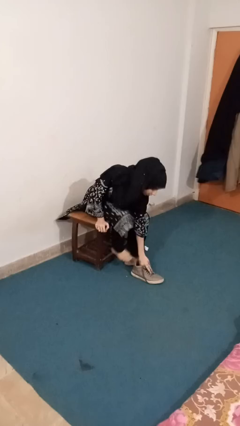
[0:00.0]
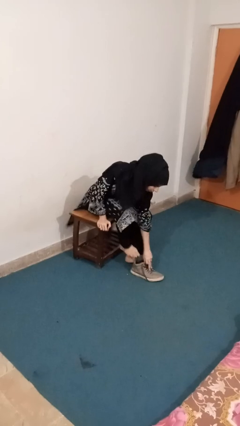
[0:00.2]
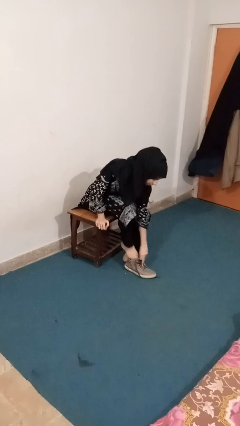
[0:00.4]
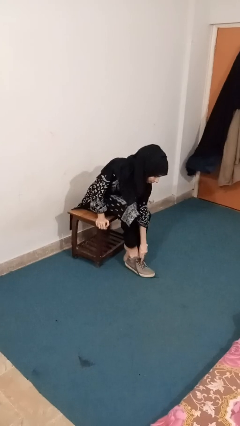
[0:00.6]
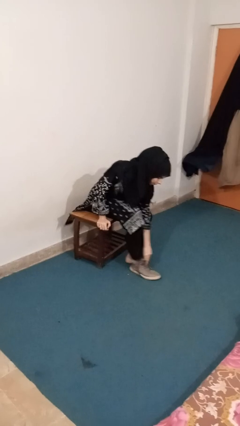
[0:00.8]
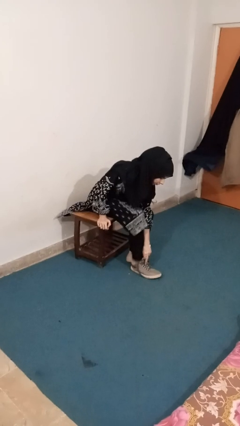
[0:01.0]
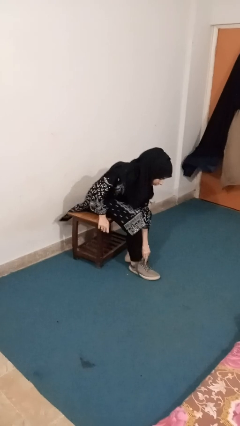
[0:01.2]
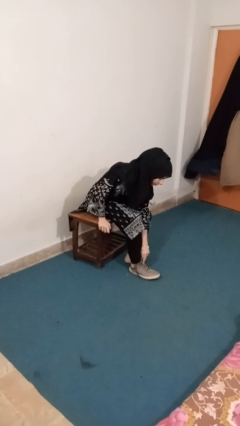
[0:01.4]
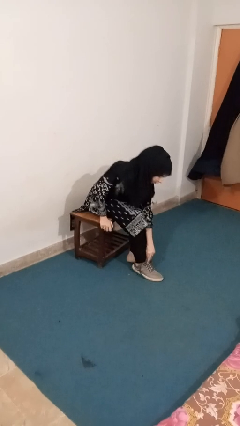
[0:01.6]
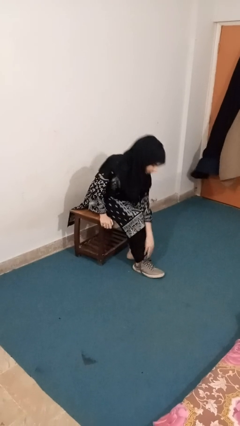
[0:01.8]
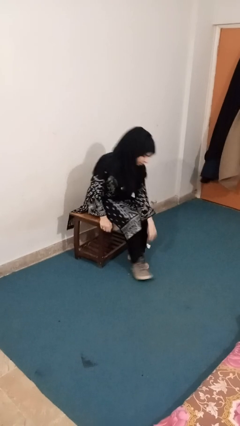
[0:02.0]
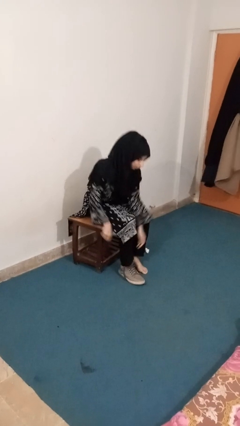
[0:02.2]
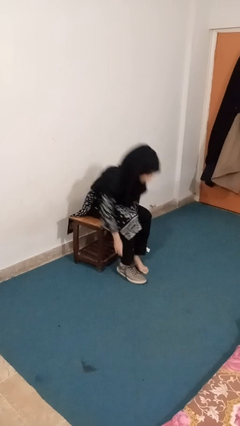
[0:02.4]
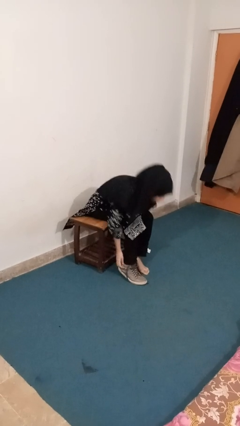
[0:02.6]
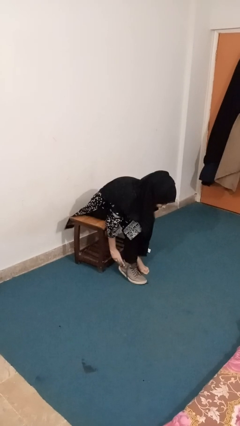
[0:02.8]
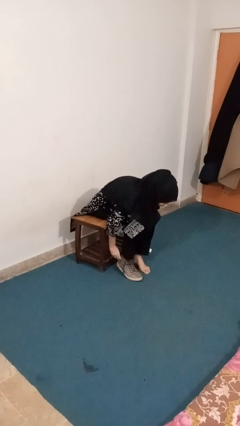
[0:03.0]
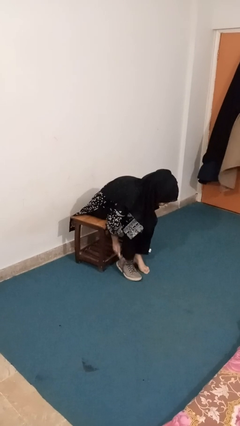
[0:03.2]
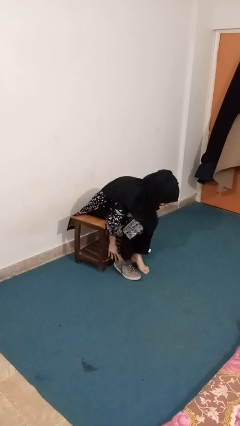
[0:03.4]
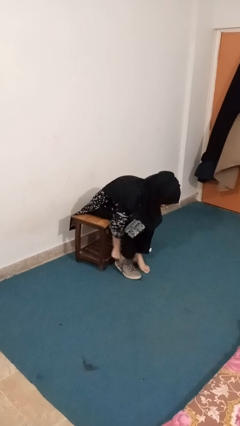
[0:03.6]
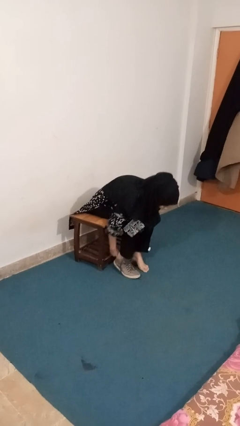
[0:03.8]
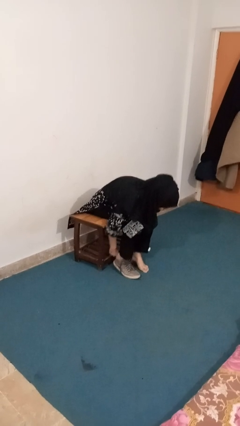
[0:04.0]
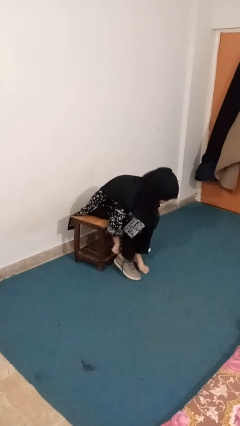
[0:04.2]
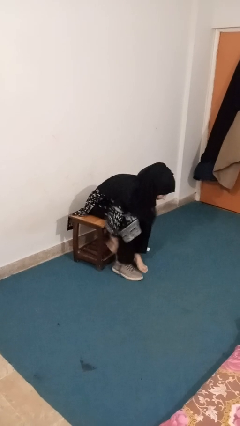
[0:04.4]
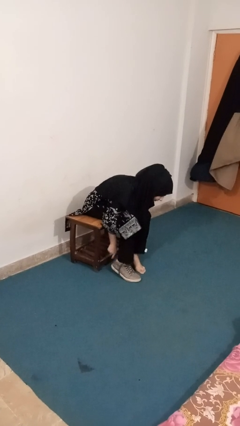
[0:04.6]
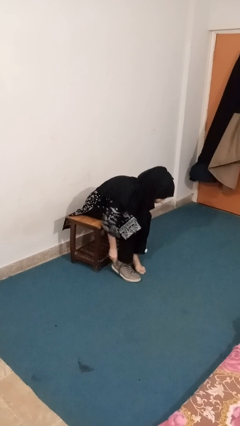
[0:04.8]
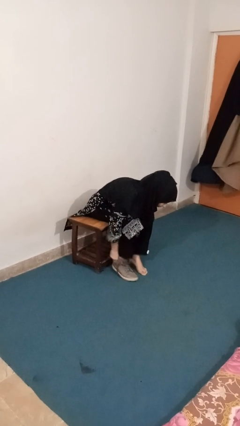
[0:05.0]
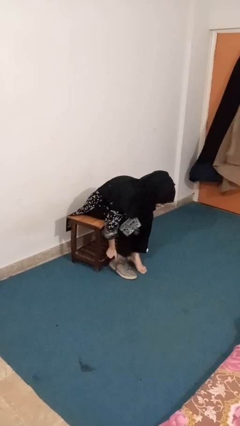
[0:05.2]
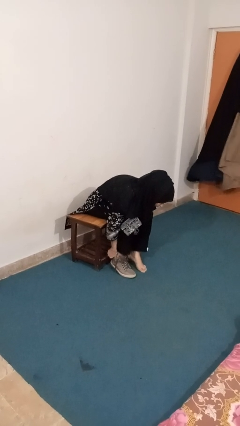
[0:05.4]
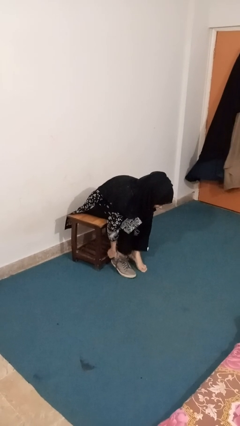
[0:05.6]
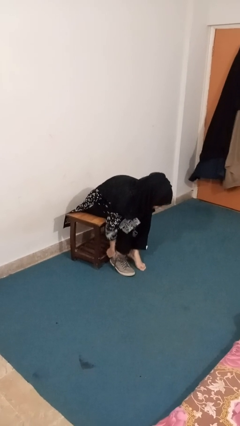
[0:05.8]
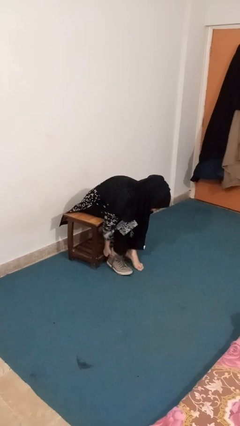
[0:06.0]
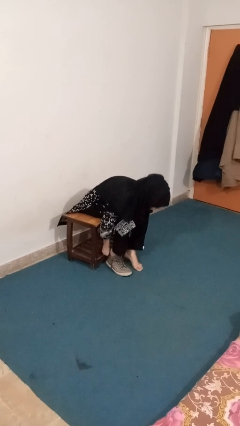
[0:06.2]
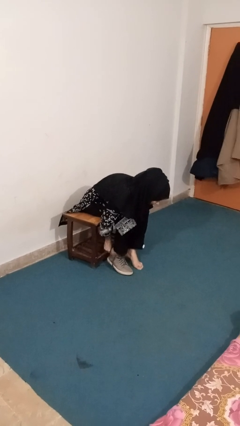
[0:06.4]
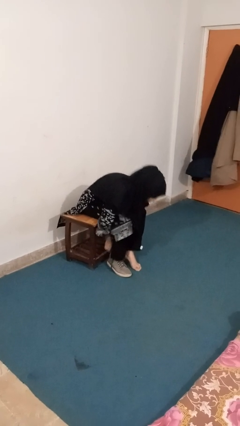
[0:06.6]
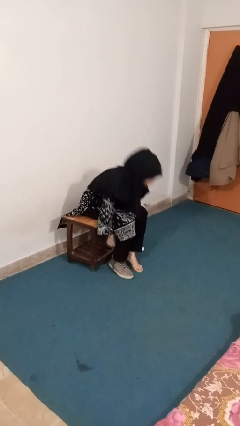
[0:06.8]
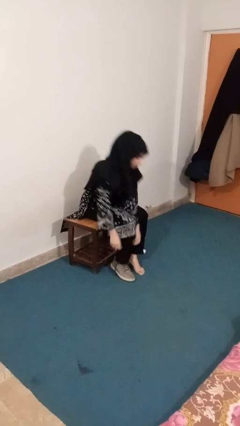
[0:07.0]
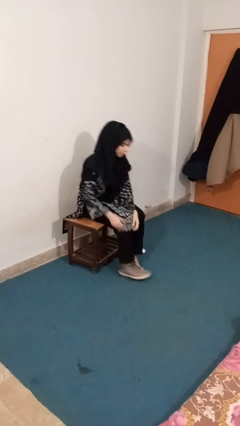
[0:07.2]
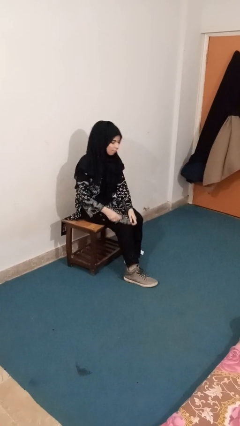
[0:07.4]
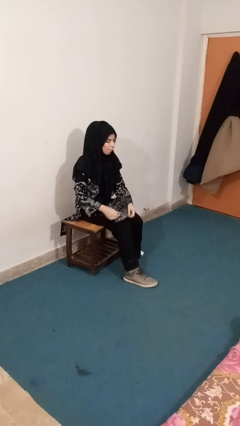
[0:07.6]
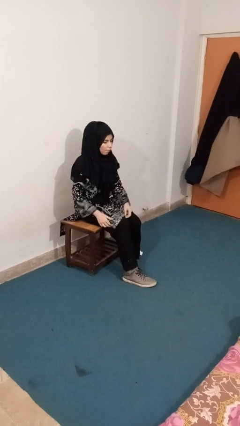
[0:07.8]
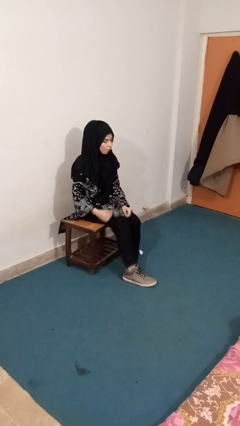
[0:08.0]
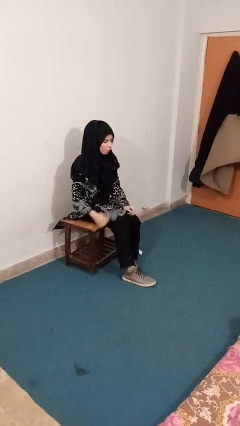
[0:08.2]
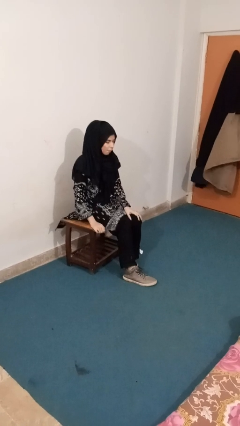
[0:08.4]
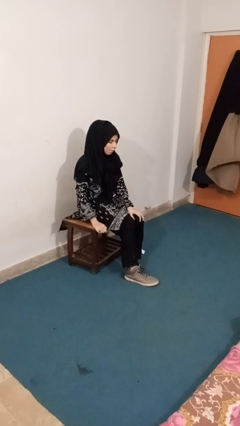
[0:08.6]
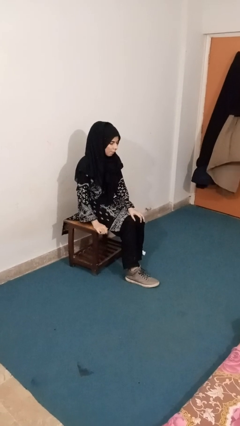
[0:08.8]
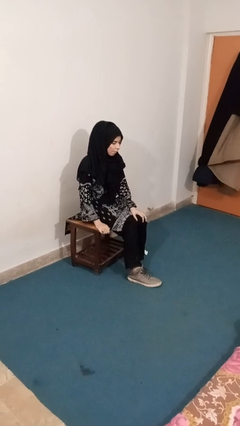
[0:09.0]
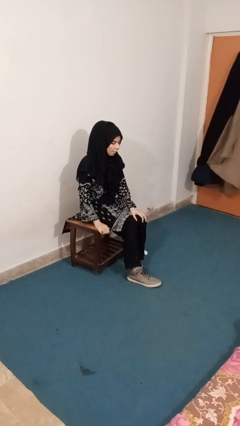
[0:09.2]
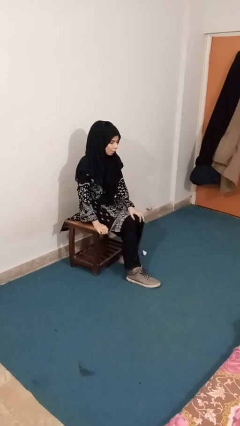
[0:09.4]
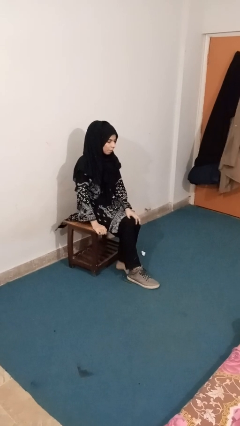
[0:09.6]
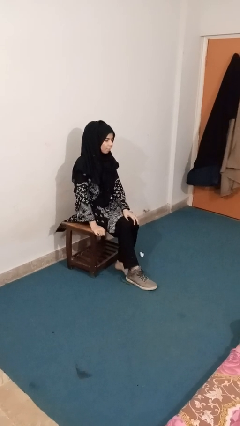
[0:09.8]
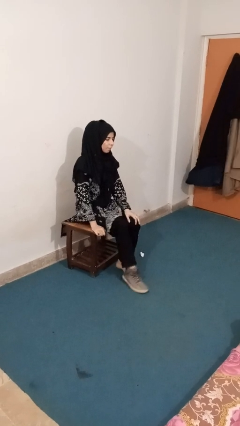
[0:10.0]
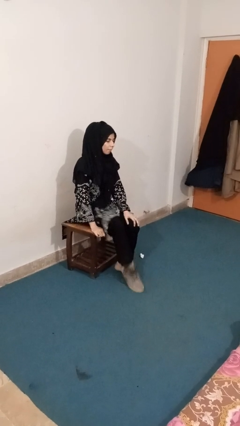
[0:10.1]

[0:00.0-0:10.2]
person knocks over furniture

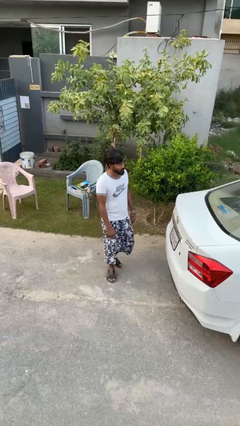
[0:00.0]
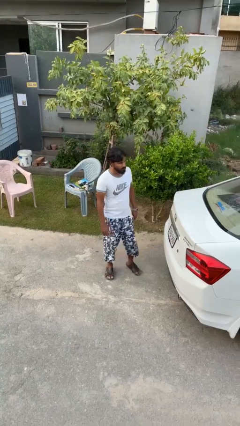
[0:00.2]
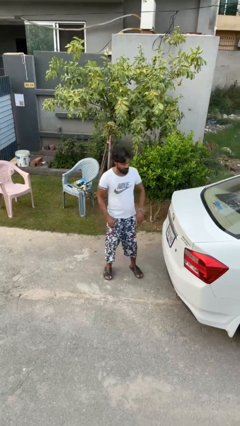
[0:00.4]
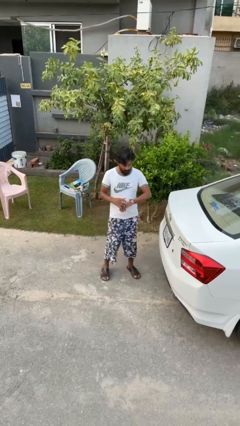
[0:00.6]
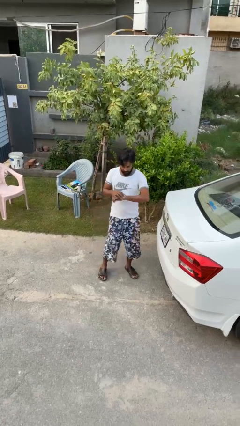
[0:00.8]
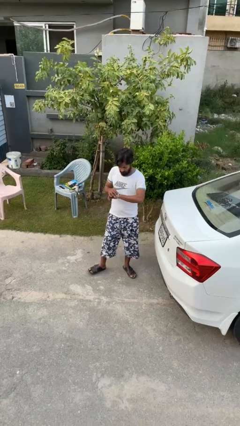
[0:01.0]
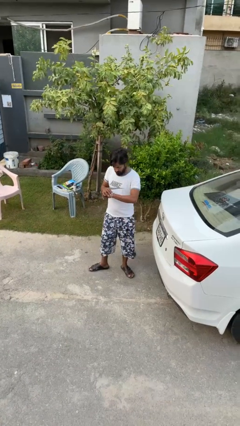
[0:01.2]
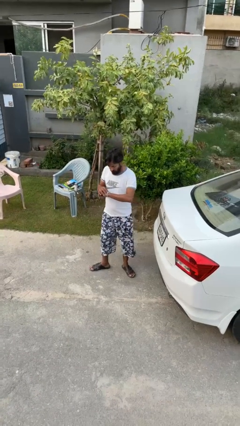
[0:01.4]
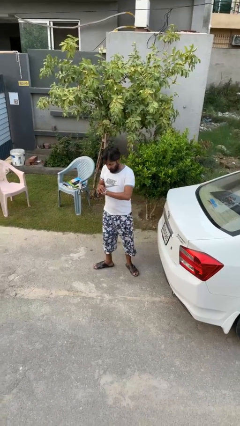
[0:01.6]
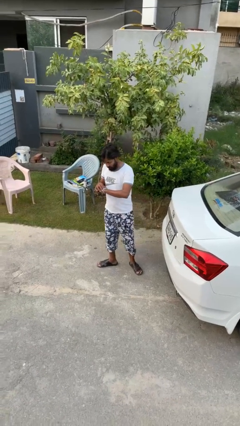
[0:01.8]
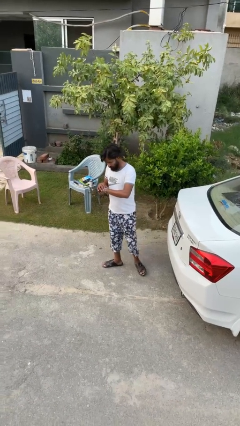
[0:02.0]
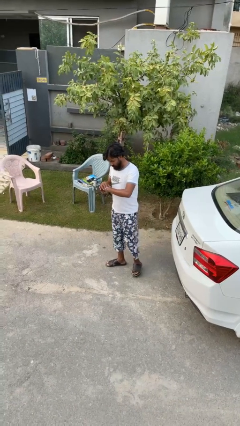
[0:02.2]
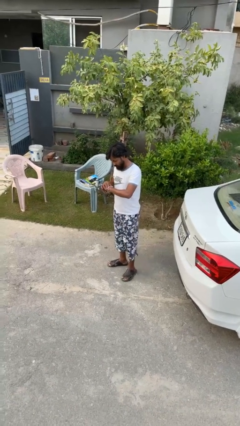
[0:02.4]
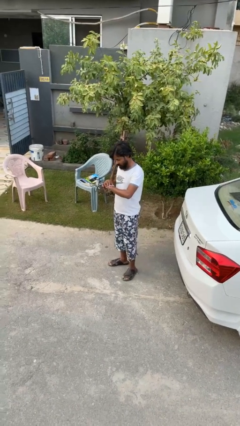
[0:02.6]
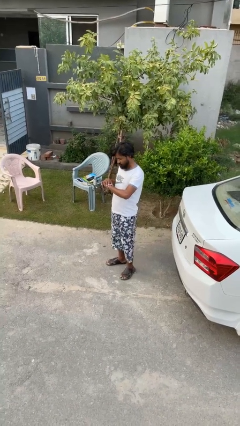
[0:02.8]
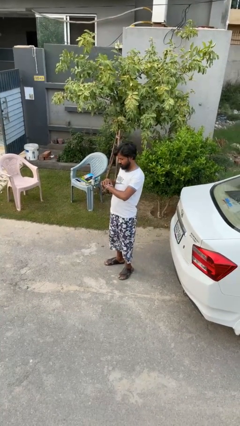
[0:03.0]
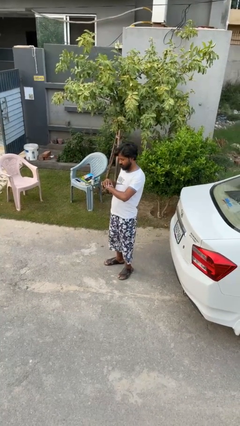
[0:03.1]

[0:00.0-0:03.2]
person looks at wristwatch

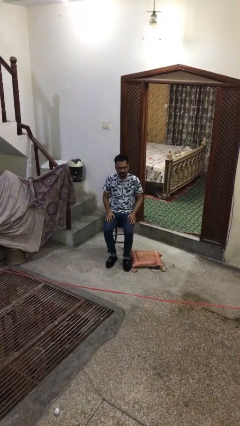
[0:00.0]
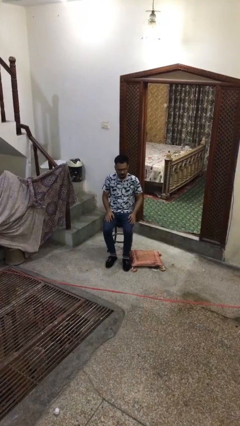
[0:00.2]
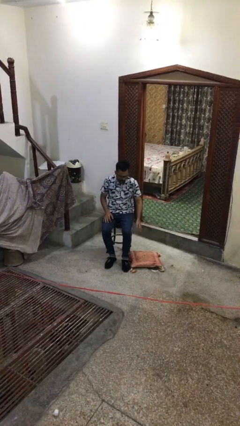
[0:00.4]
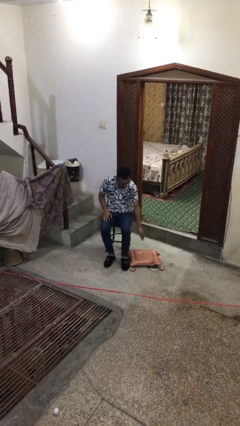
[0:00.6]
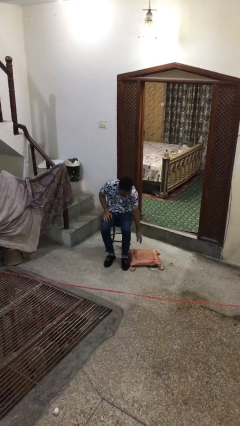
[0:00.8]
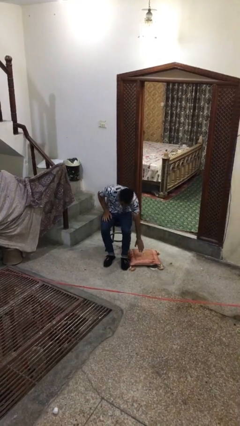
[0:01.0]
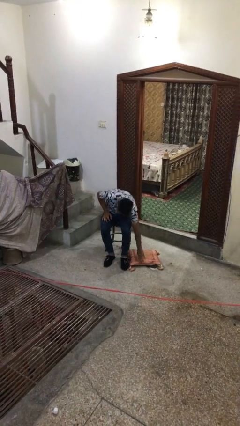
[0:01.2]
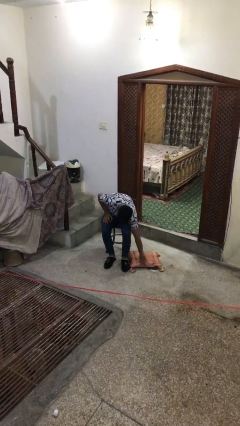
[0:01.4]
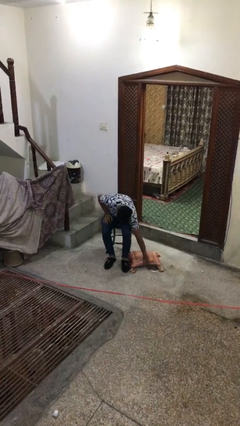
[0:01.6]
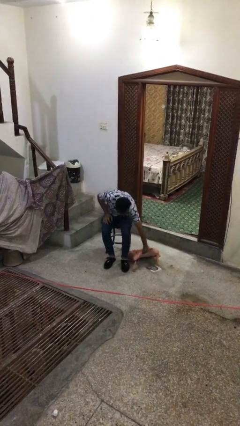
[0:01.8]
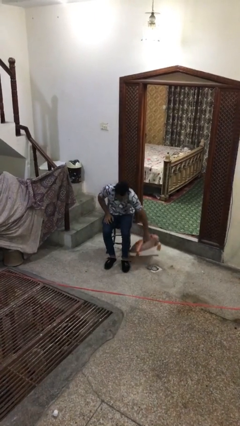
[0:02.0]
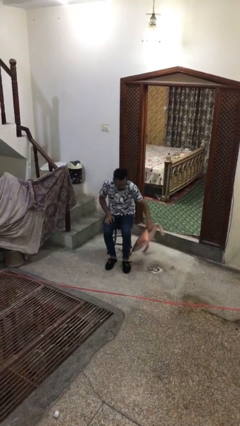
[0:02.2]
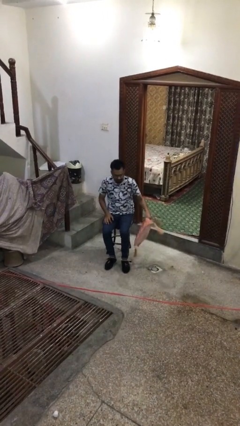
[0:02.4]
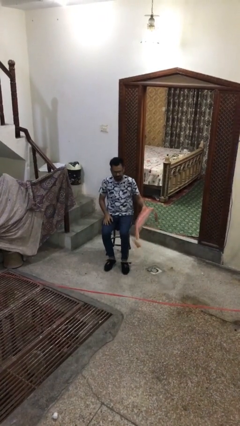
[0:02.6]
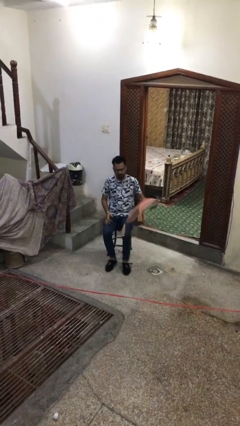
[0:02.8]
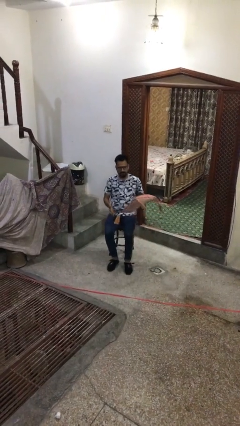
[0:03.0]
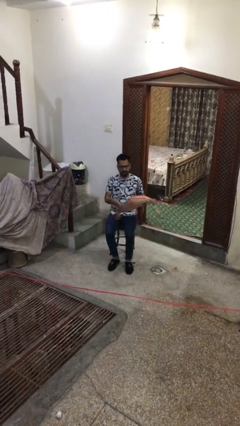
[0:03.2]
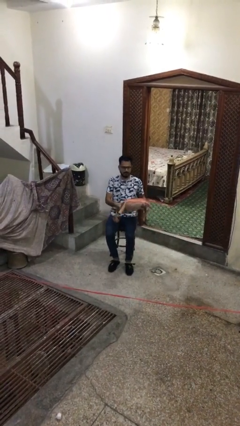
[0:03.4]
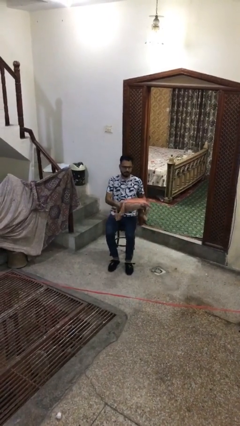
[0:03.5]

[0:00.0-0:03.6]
person picks up object from floor

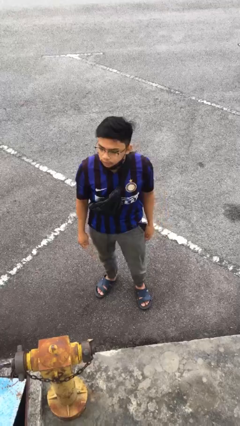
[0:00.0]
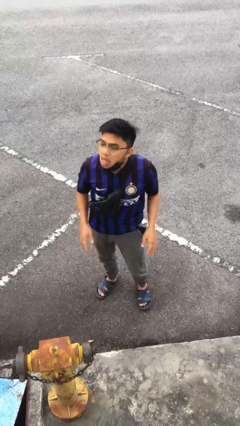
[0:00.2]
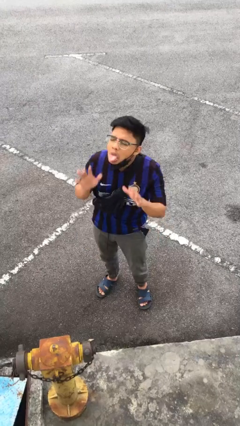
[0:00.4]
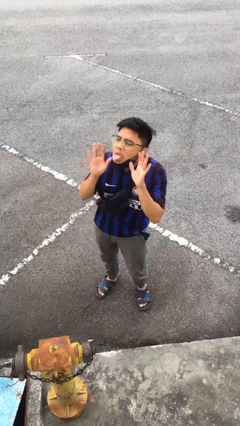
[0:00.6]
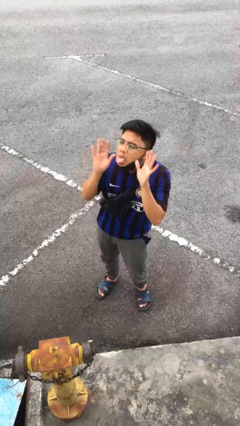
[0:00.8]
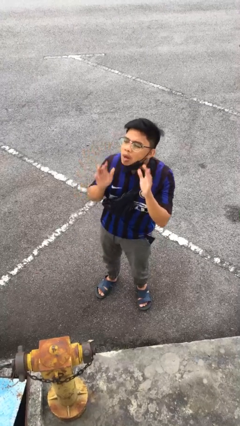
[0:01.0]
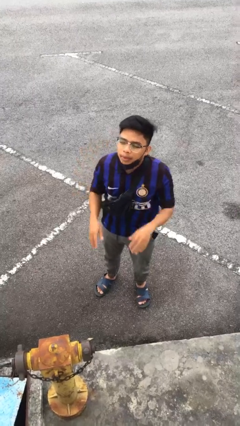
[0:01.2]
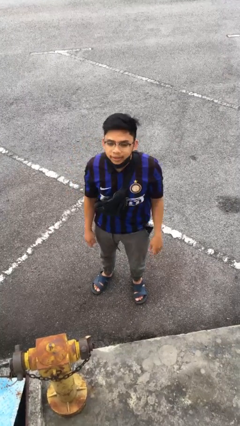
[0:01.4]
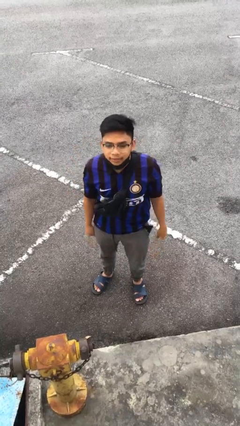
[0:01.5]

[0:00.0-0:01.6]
person sticks out tongue
